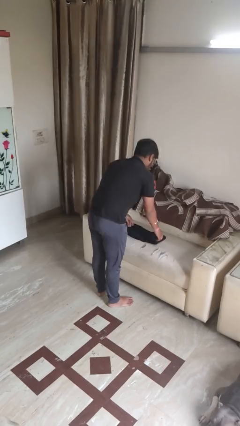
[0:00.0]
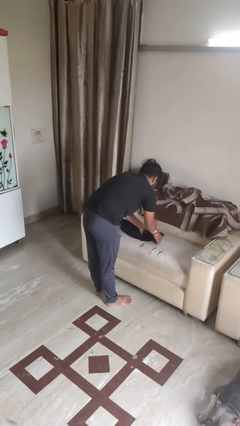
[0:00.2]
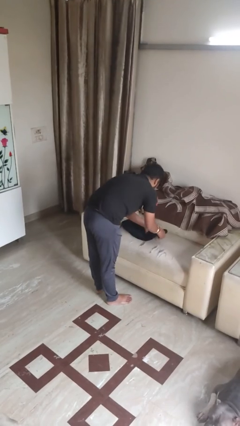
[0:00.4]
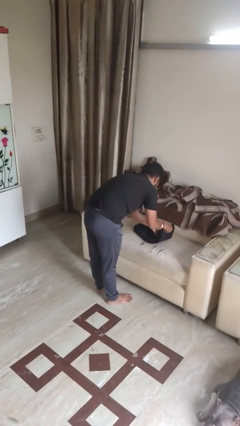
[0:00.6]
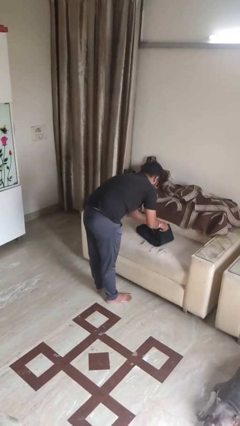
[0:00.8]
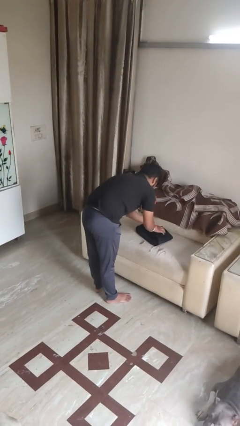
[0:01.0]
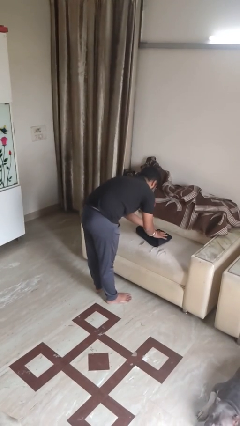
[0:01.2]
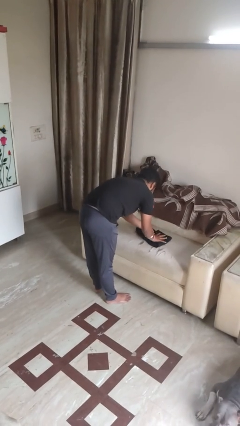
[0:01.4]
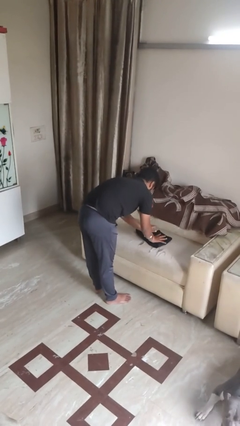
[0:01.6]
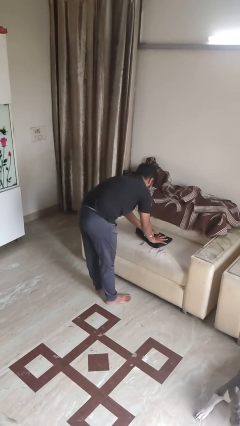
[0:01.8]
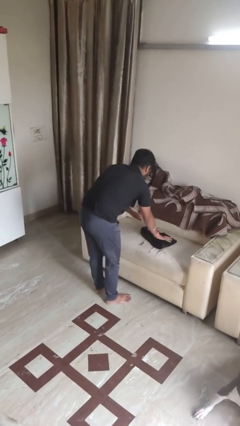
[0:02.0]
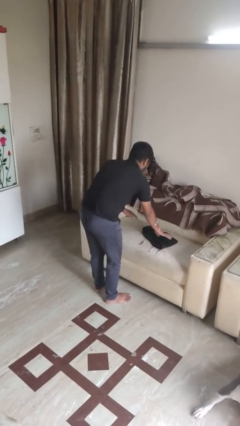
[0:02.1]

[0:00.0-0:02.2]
person folds pants

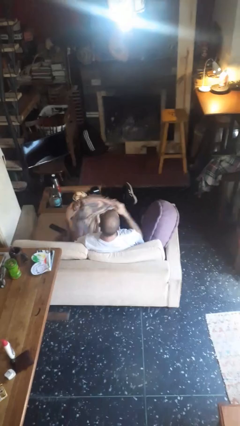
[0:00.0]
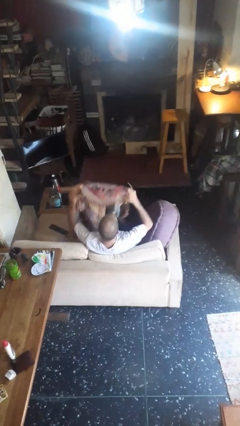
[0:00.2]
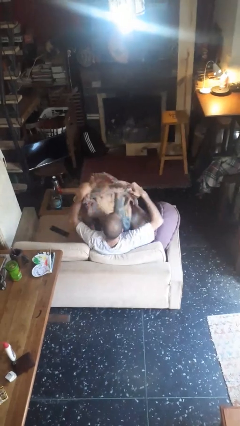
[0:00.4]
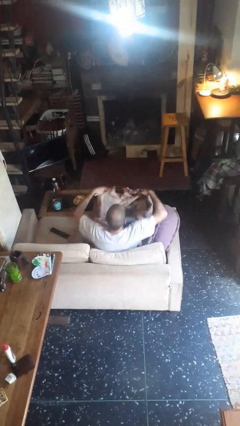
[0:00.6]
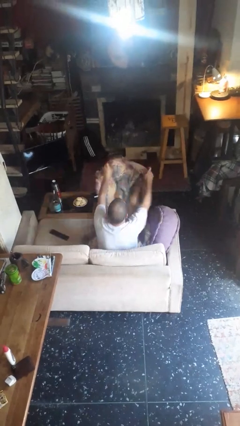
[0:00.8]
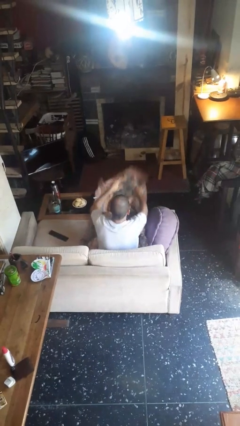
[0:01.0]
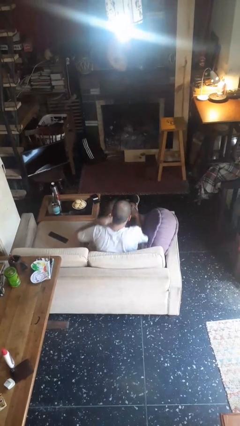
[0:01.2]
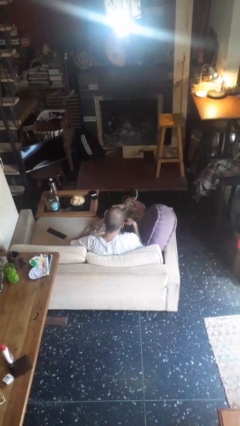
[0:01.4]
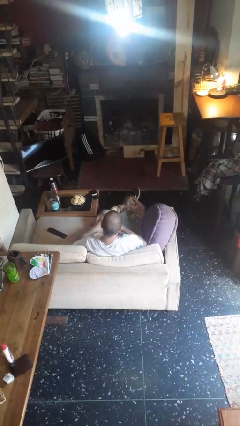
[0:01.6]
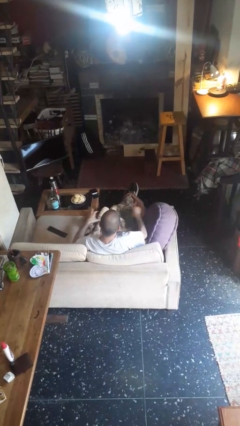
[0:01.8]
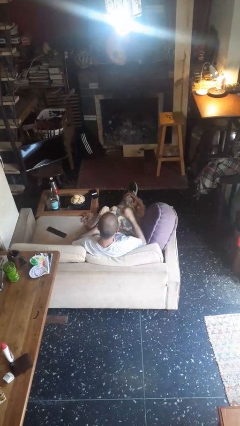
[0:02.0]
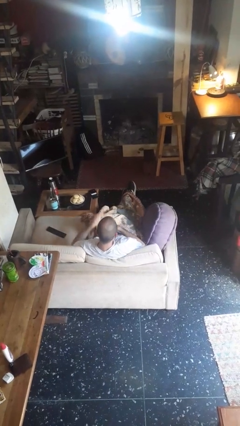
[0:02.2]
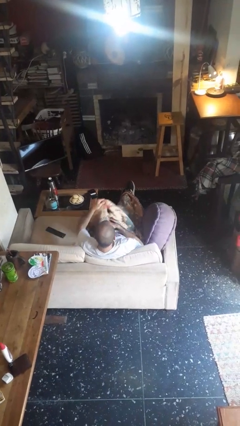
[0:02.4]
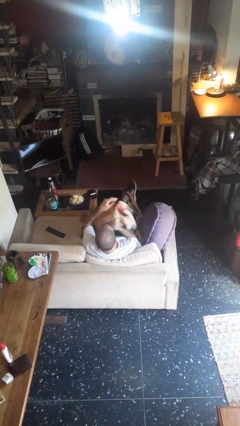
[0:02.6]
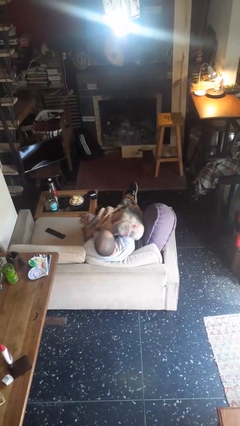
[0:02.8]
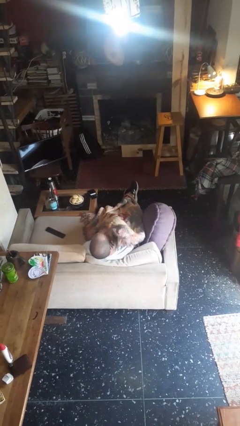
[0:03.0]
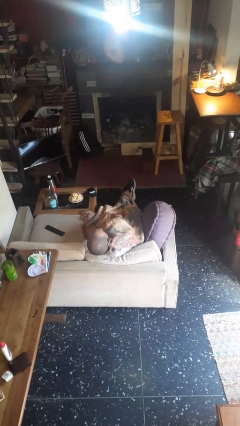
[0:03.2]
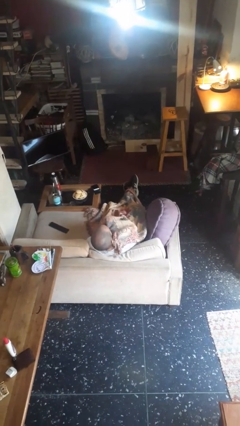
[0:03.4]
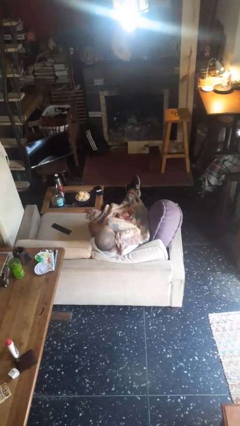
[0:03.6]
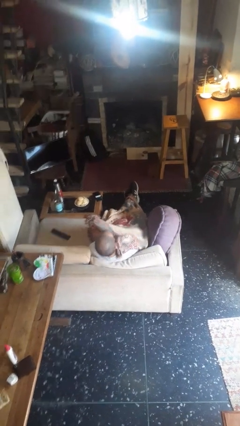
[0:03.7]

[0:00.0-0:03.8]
person covers with blanket

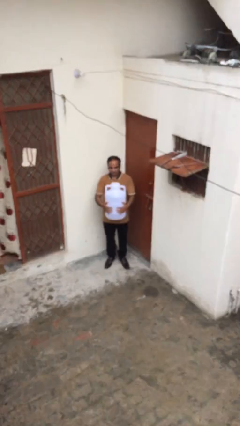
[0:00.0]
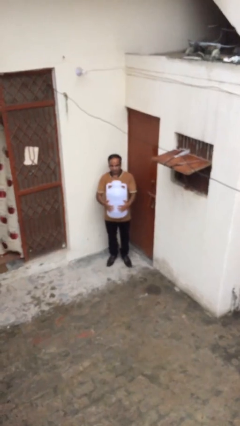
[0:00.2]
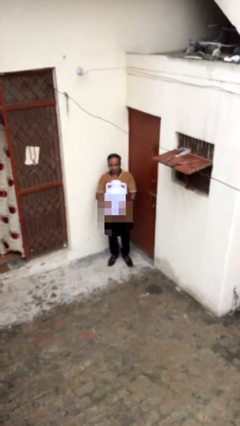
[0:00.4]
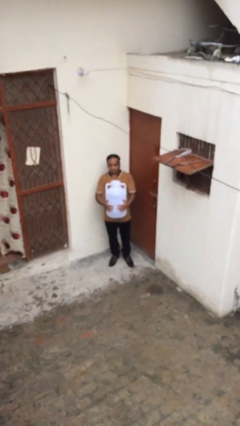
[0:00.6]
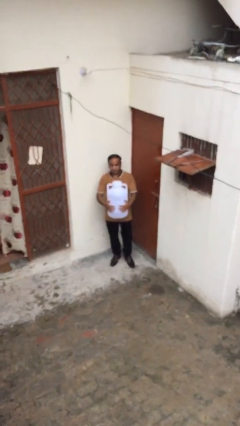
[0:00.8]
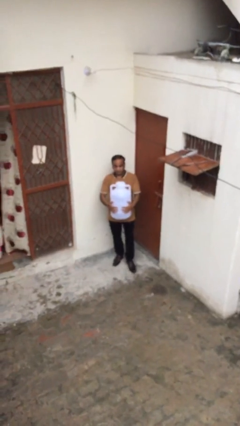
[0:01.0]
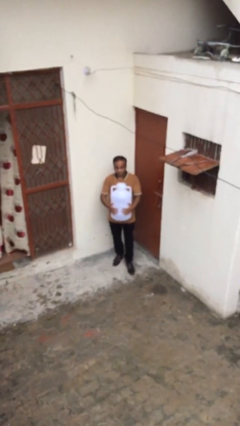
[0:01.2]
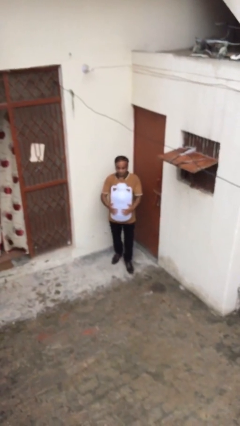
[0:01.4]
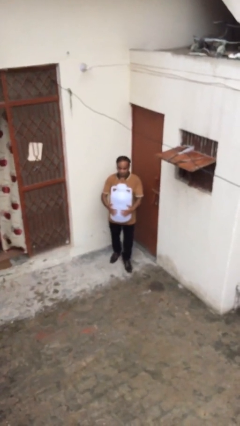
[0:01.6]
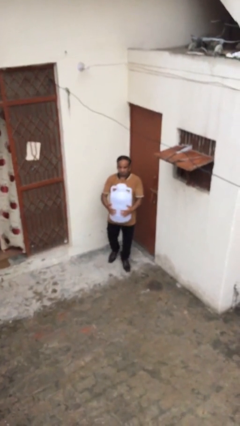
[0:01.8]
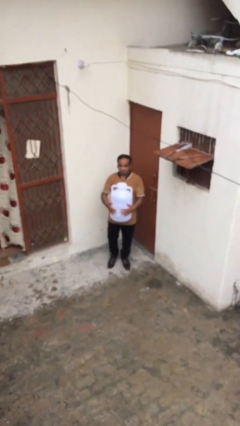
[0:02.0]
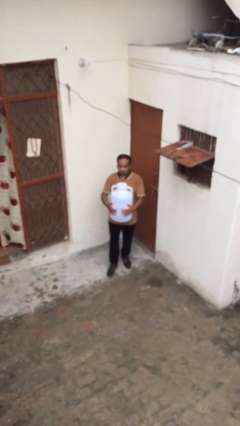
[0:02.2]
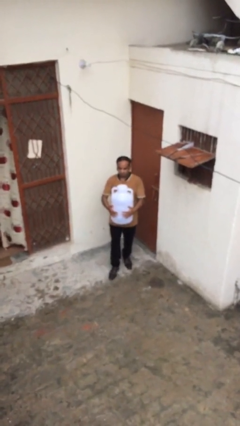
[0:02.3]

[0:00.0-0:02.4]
person carries heavy object

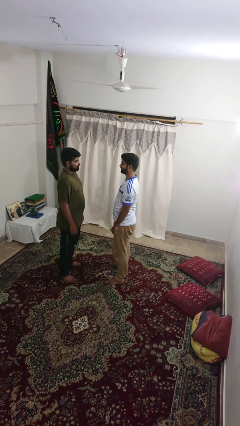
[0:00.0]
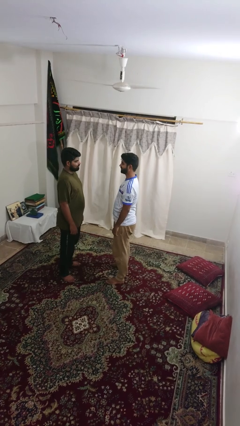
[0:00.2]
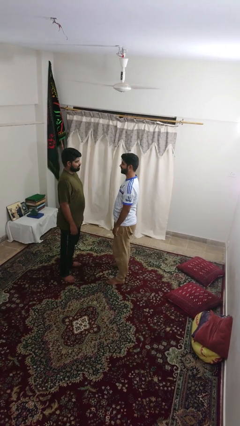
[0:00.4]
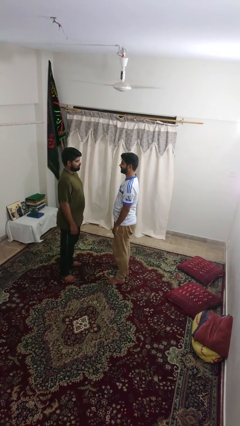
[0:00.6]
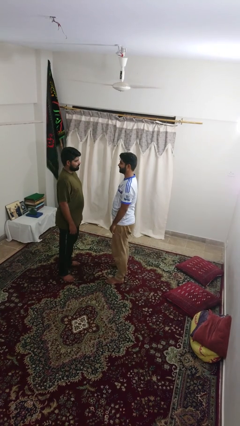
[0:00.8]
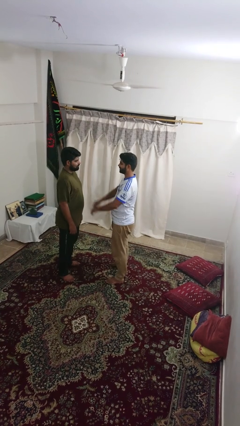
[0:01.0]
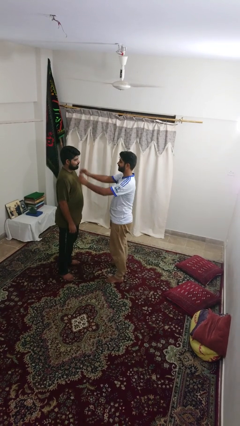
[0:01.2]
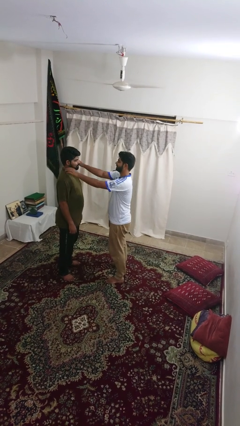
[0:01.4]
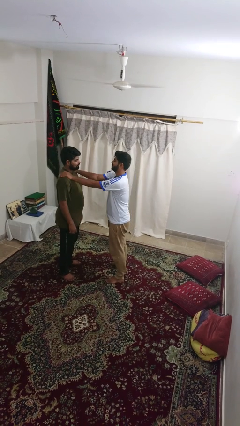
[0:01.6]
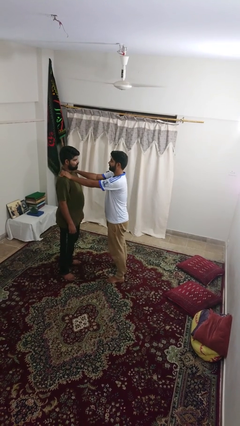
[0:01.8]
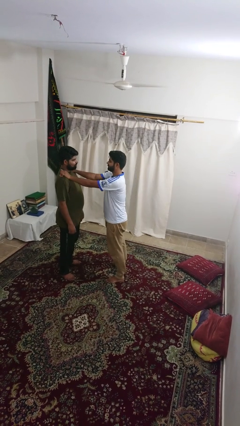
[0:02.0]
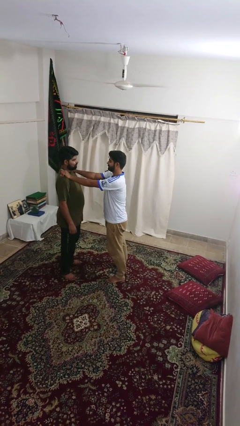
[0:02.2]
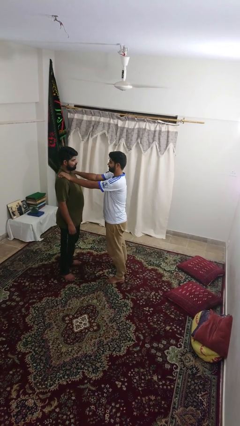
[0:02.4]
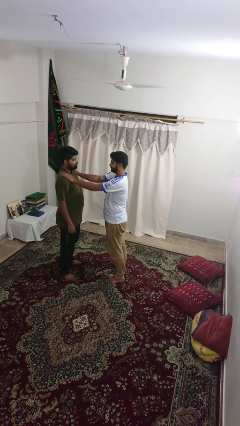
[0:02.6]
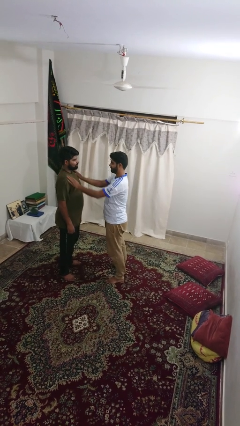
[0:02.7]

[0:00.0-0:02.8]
person pounds shoulders of person

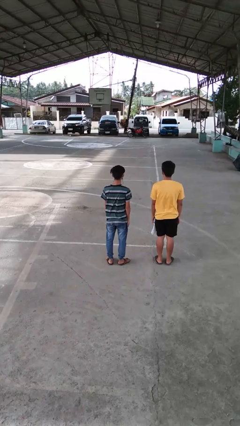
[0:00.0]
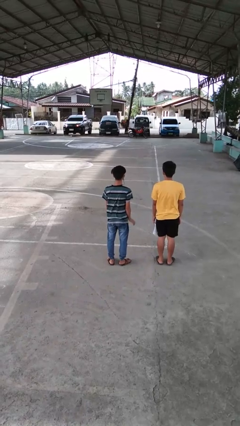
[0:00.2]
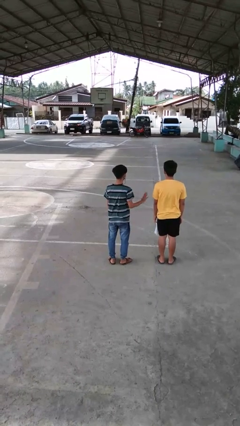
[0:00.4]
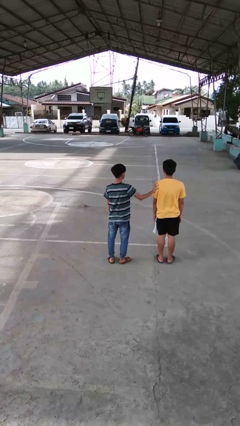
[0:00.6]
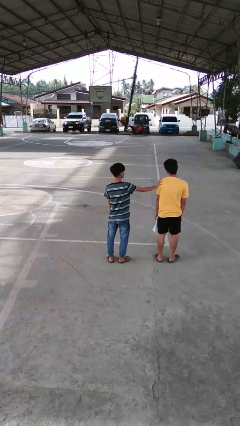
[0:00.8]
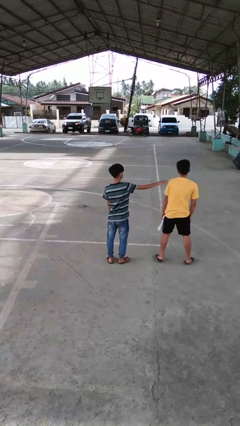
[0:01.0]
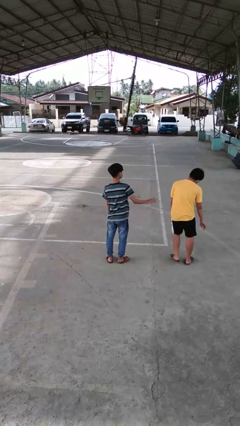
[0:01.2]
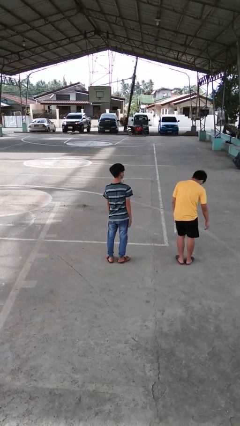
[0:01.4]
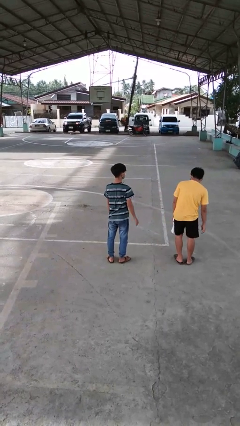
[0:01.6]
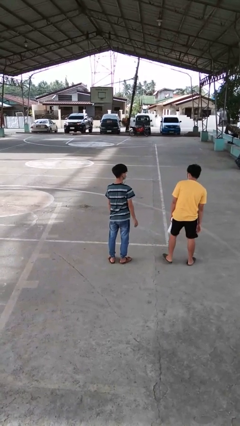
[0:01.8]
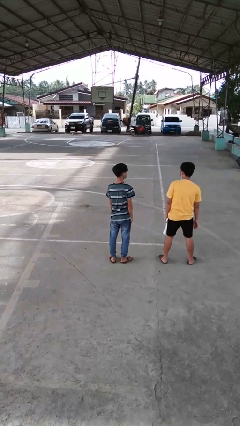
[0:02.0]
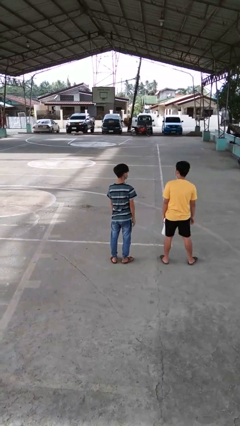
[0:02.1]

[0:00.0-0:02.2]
person shoves person

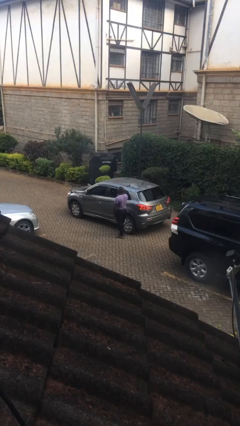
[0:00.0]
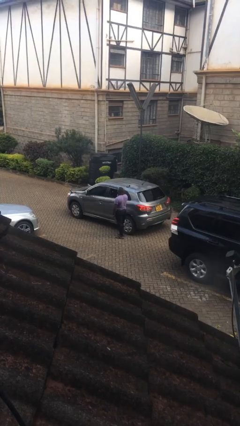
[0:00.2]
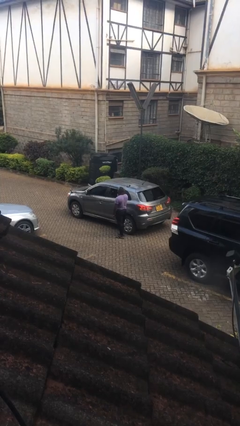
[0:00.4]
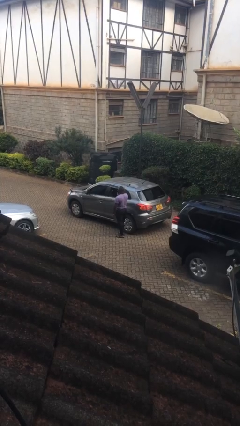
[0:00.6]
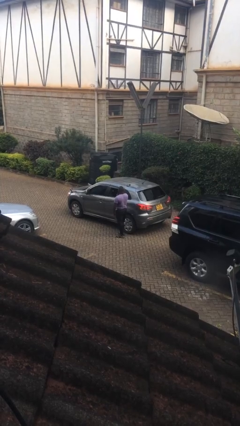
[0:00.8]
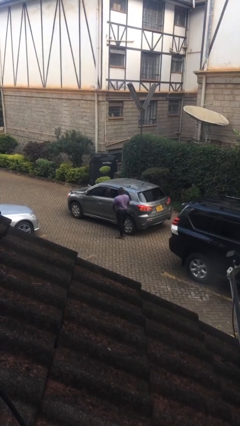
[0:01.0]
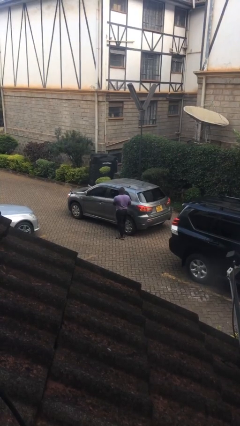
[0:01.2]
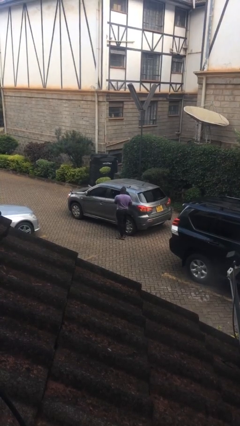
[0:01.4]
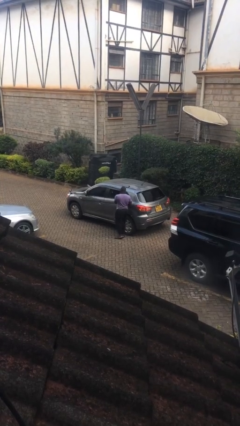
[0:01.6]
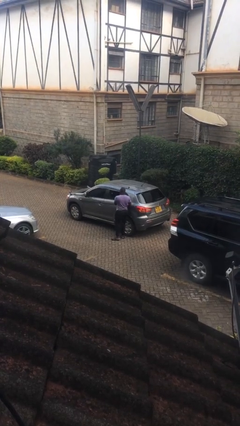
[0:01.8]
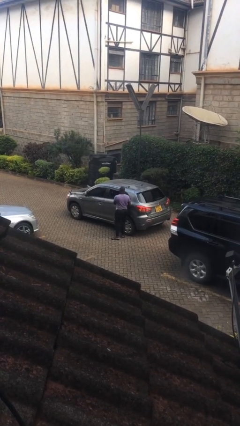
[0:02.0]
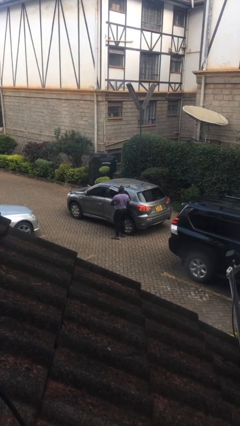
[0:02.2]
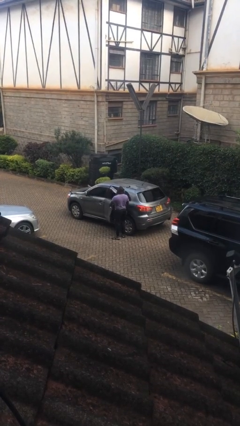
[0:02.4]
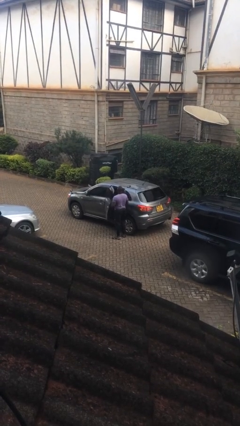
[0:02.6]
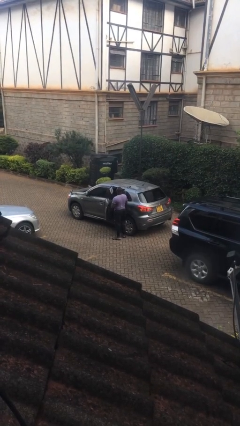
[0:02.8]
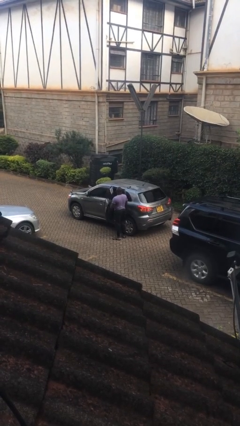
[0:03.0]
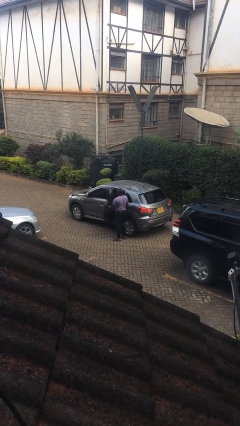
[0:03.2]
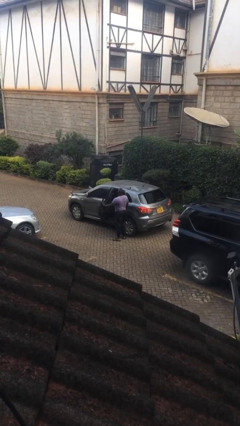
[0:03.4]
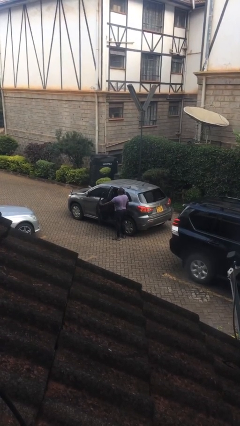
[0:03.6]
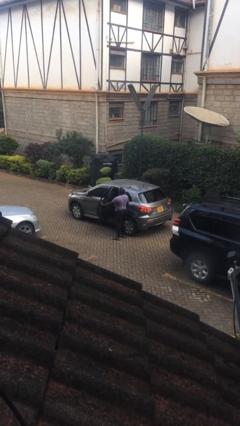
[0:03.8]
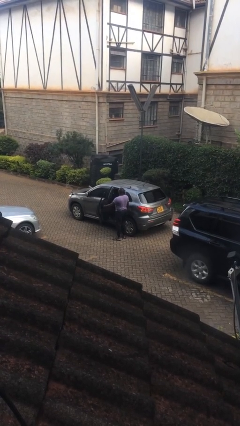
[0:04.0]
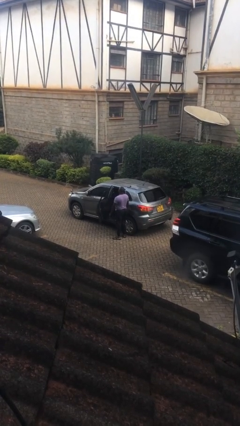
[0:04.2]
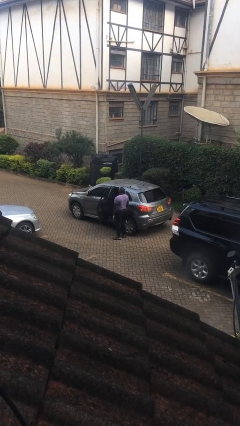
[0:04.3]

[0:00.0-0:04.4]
person opens car door
